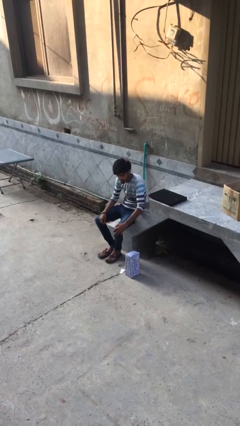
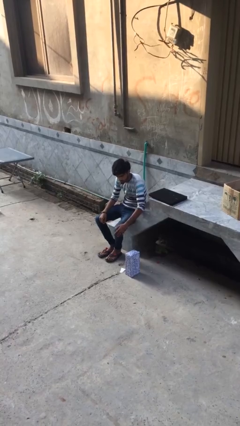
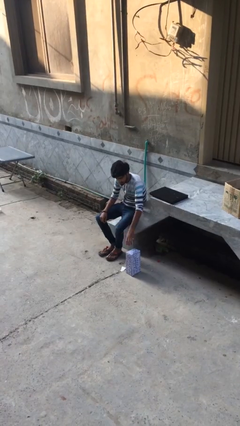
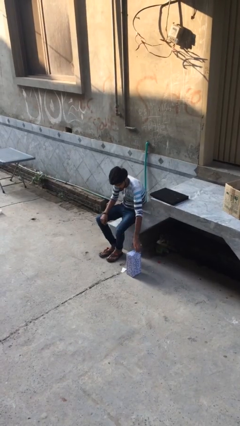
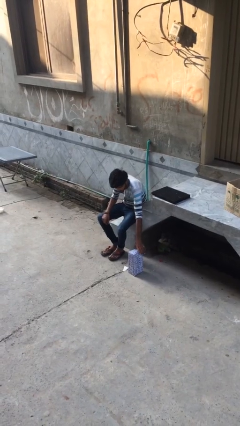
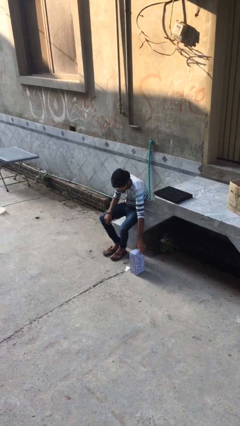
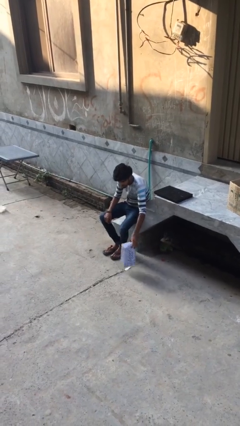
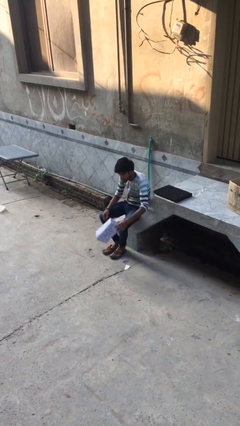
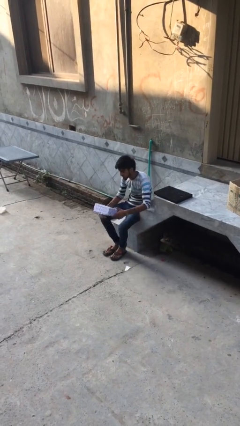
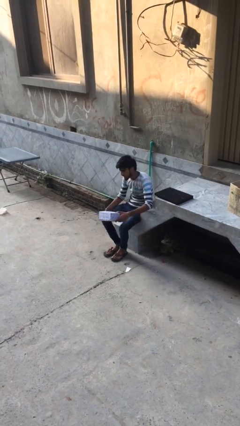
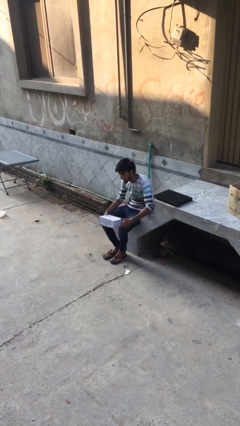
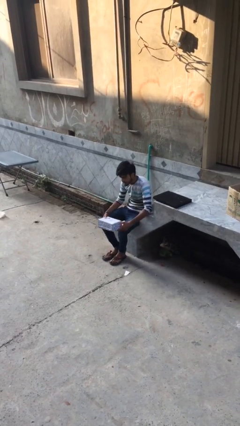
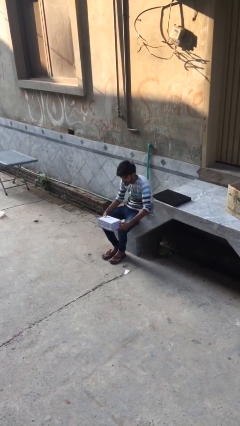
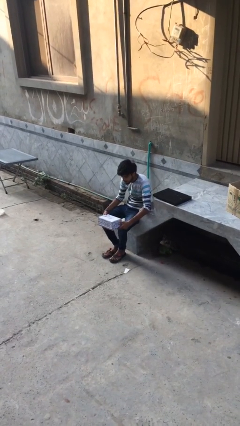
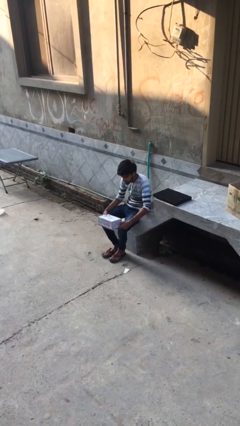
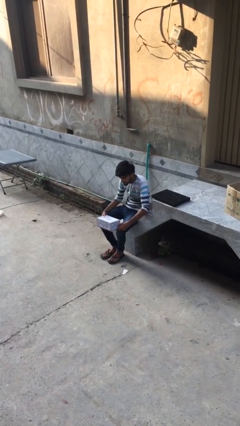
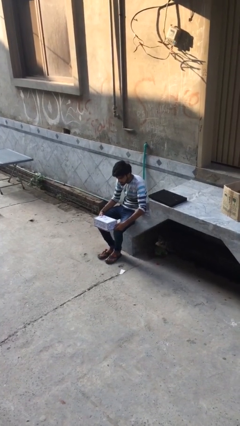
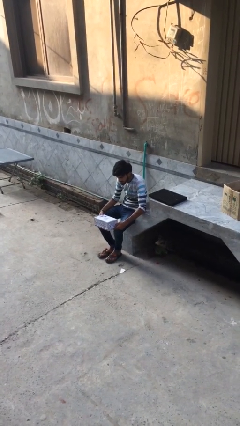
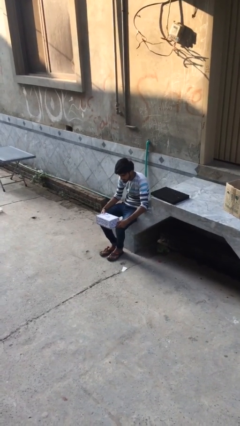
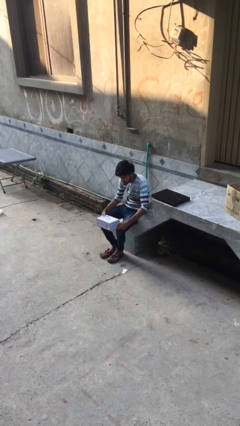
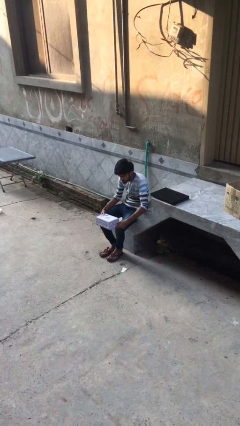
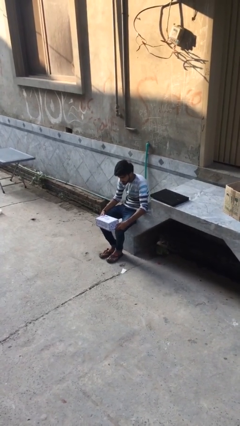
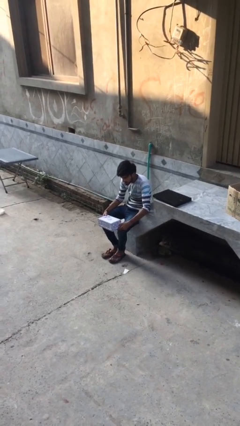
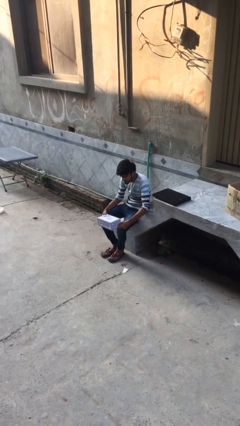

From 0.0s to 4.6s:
person picks up object from floor

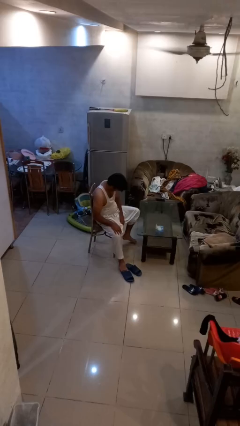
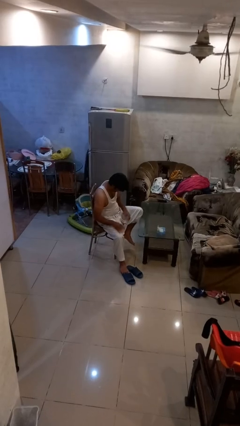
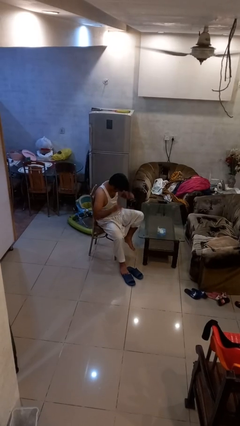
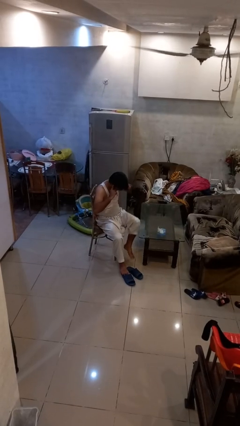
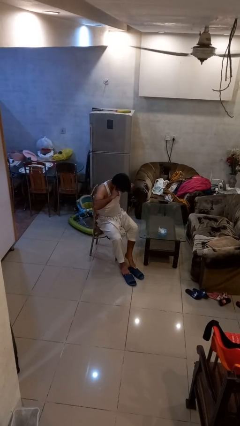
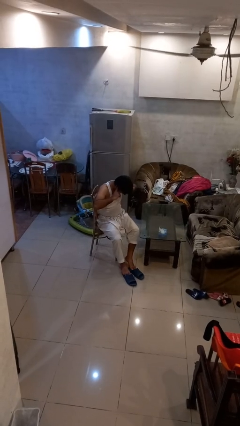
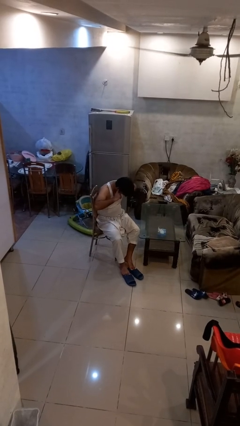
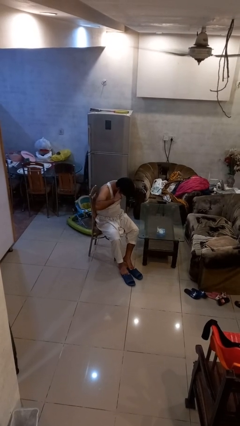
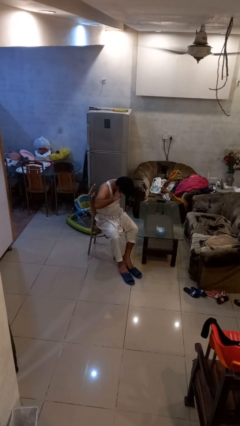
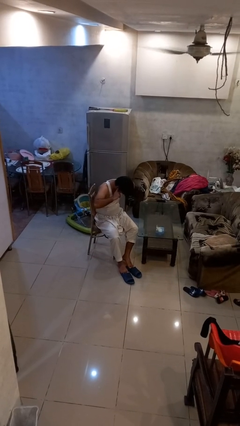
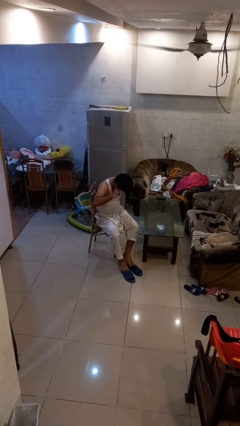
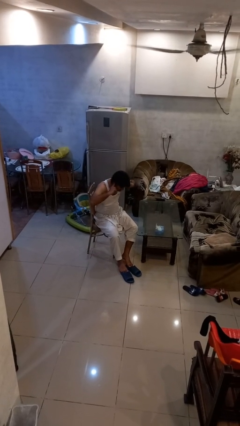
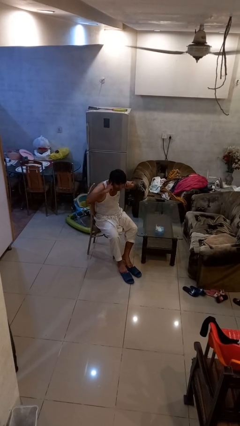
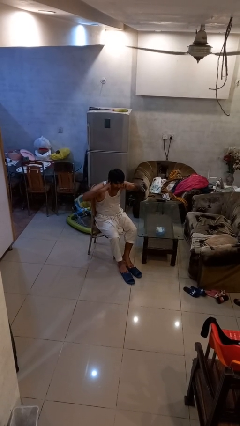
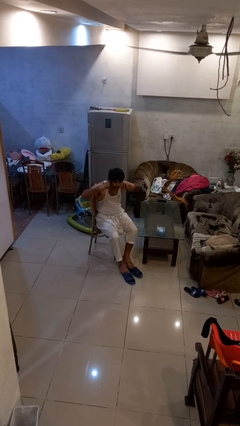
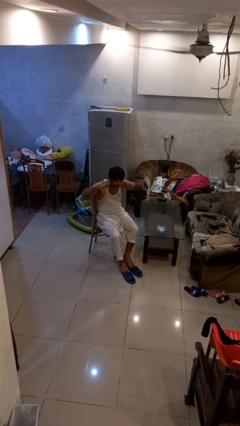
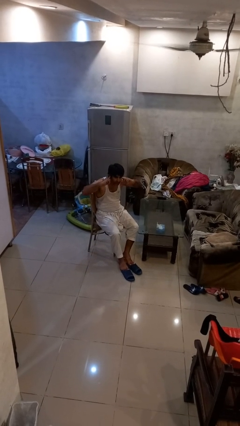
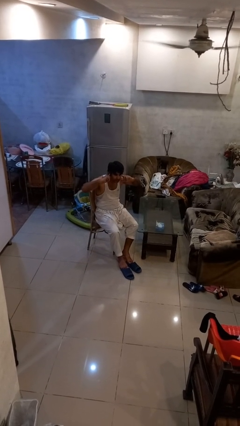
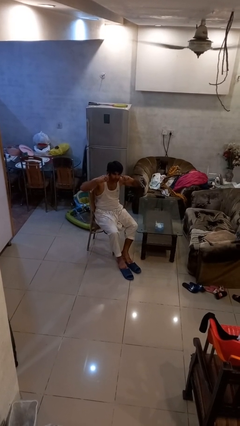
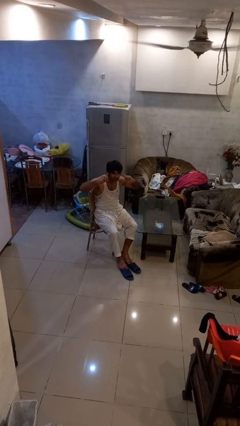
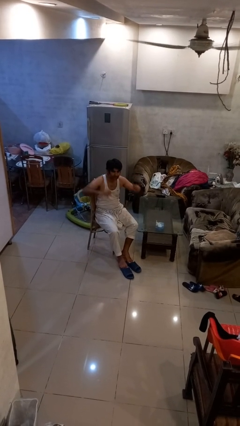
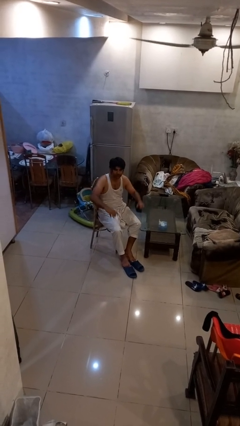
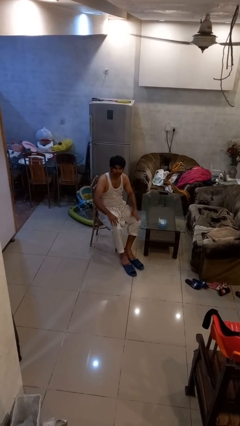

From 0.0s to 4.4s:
person puts fingers in ear

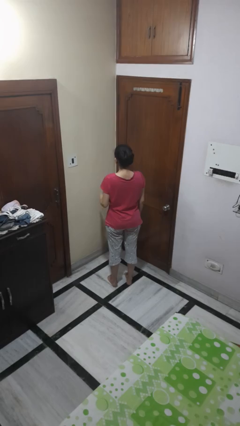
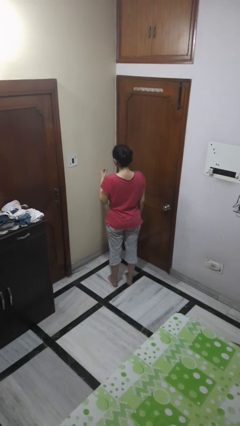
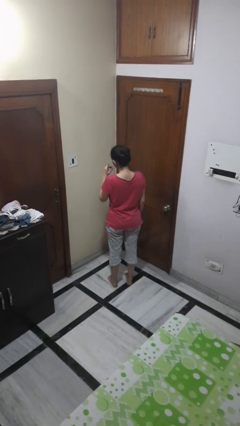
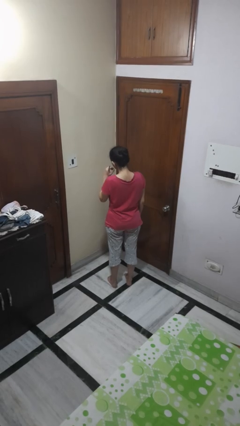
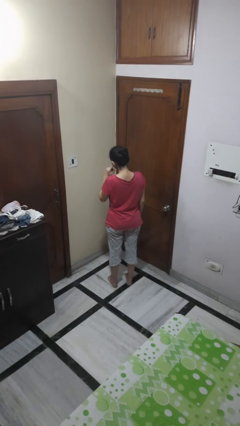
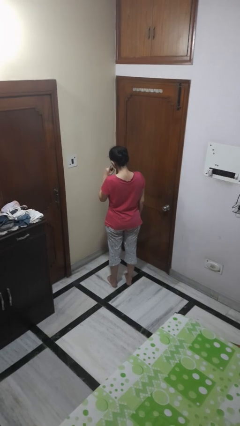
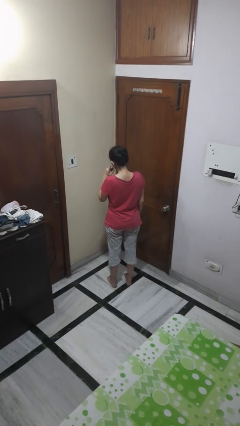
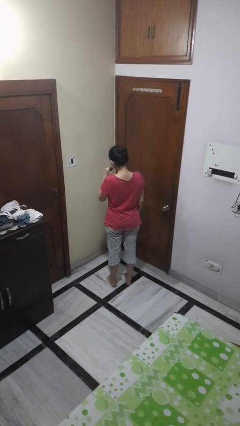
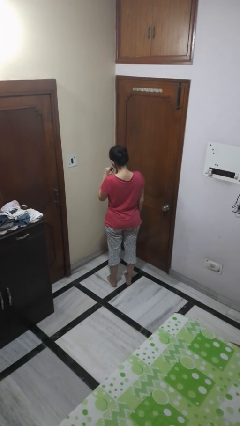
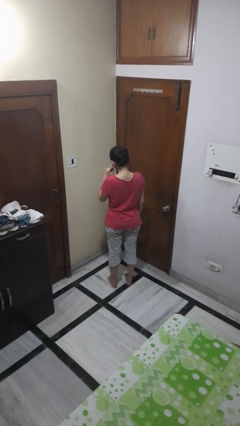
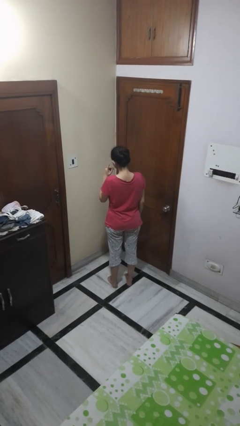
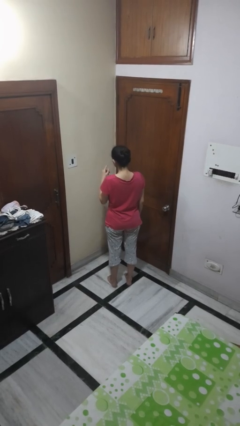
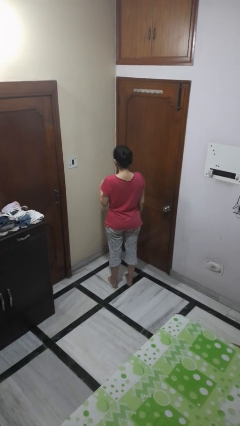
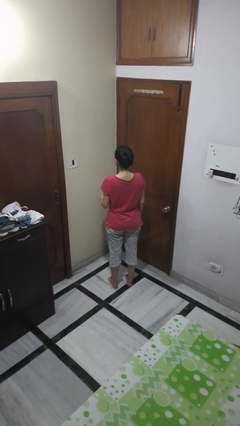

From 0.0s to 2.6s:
person gestures listen closely

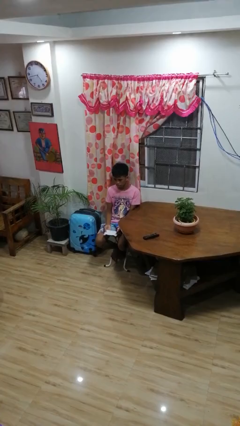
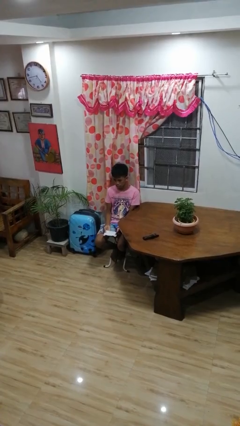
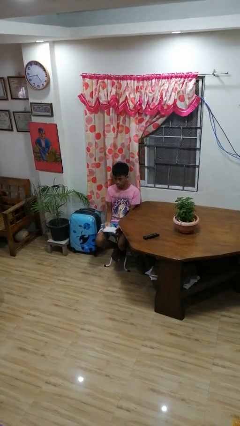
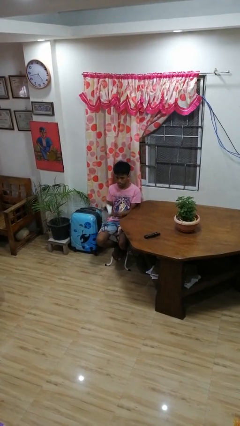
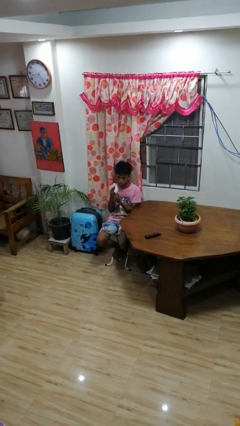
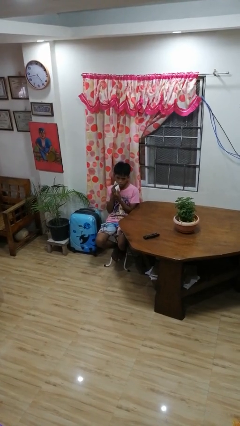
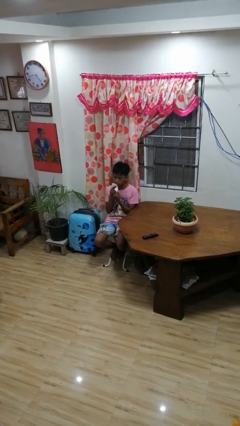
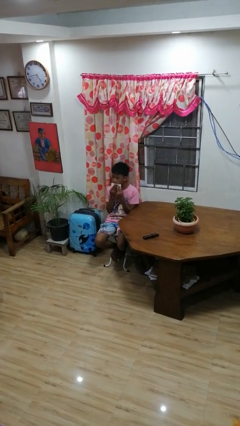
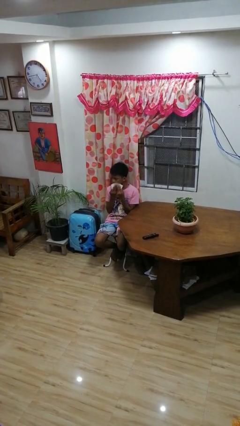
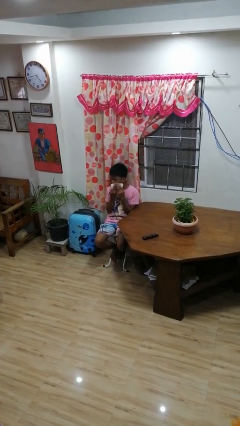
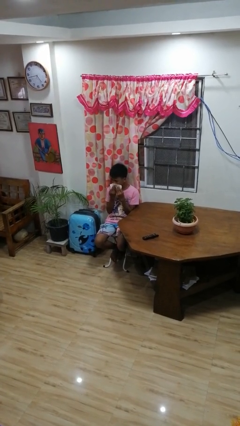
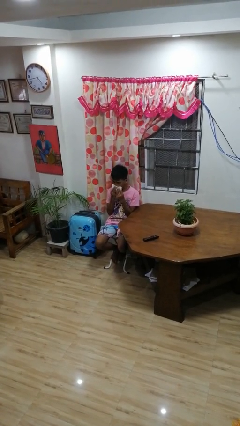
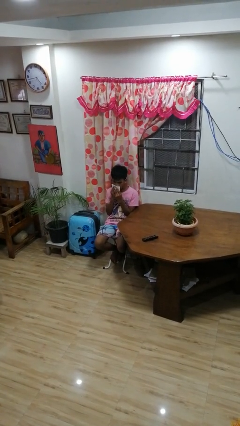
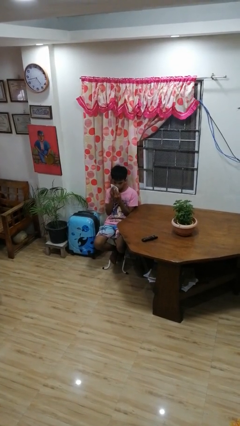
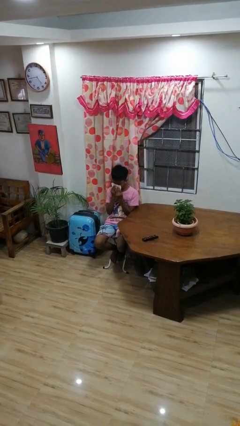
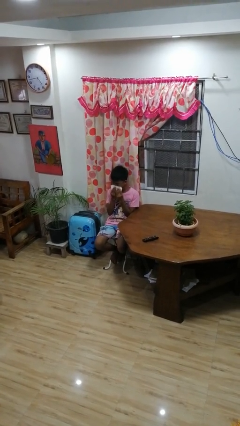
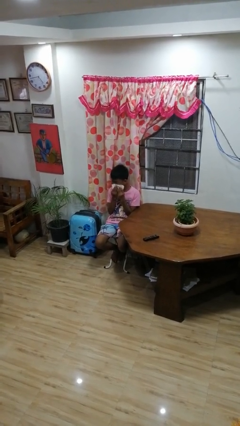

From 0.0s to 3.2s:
person wipes mouth with napkin

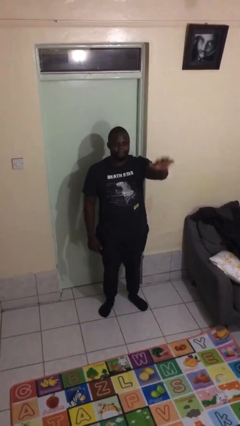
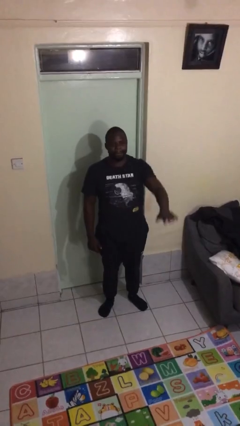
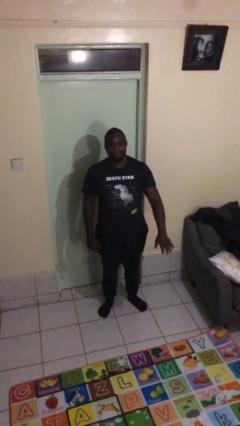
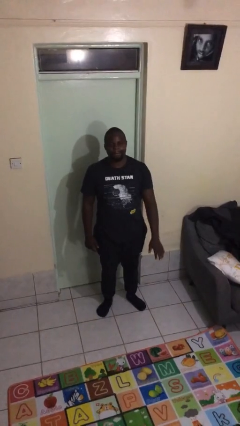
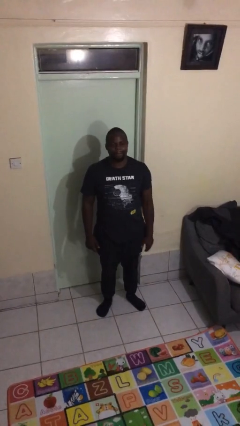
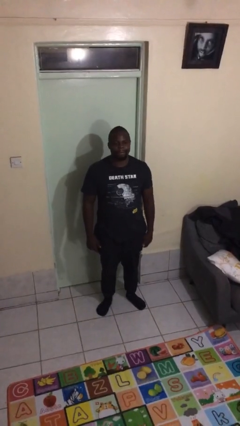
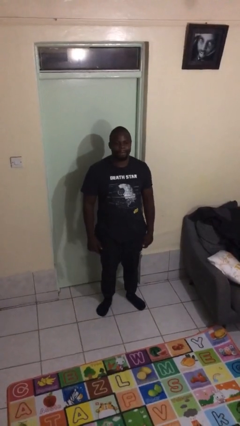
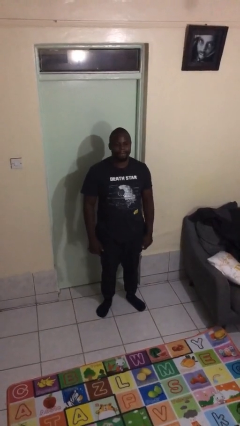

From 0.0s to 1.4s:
person gestures swipe down

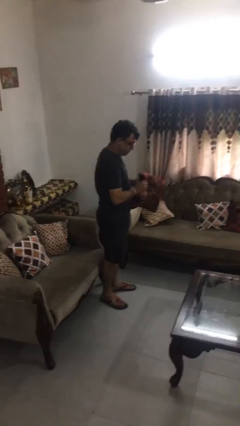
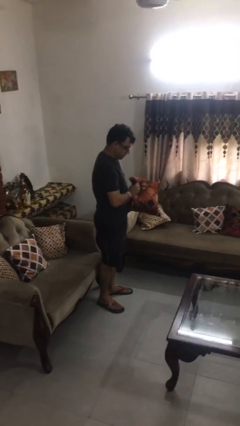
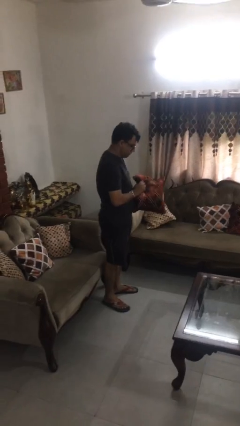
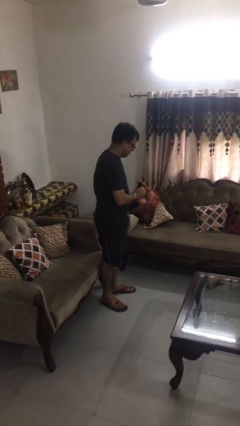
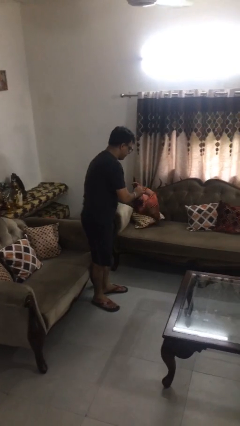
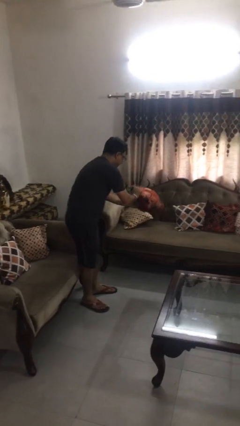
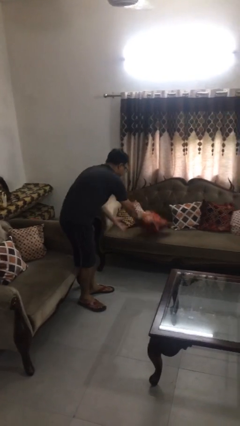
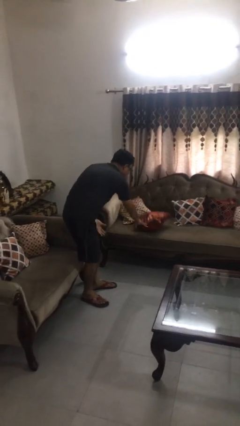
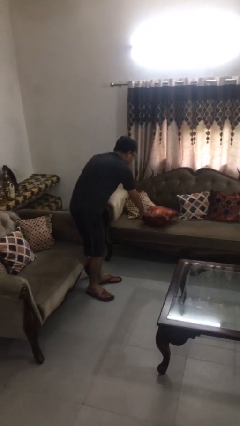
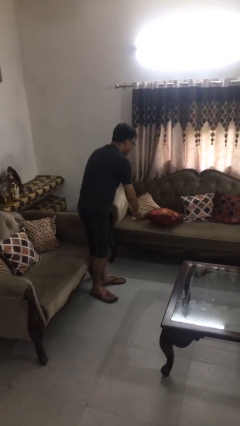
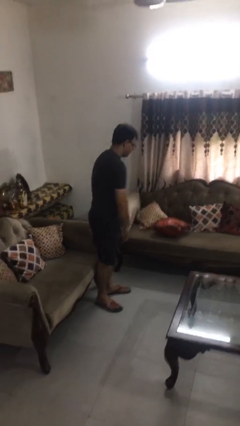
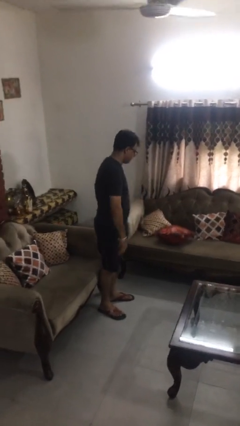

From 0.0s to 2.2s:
person puts down object on couch
